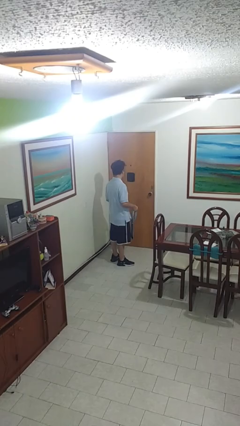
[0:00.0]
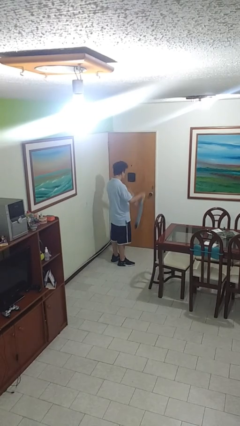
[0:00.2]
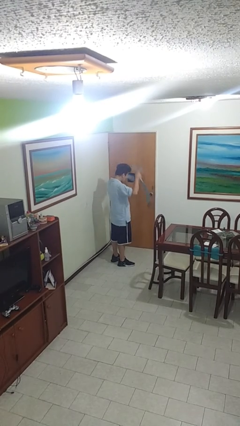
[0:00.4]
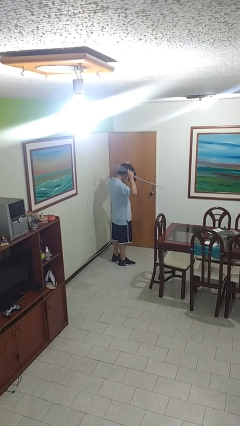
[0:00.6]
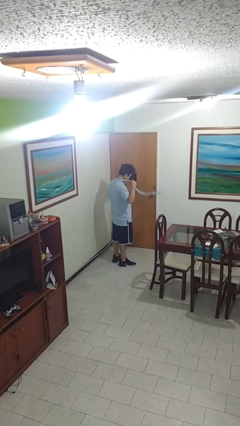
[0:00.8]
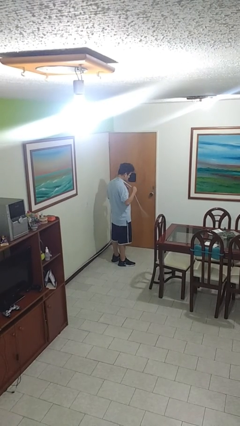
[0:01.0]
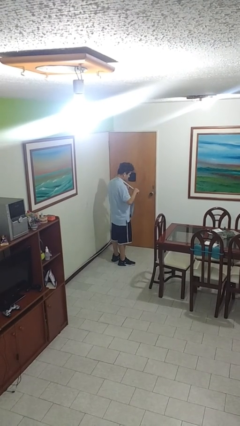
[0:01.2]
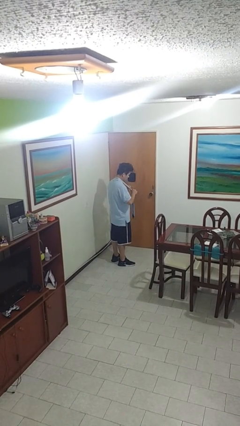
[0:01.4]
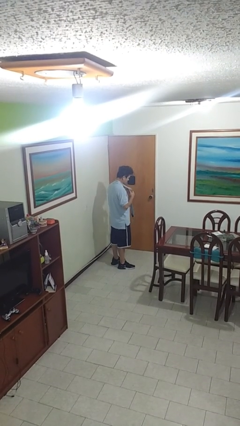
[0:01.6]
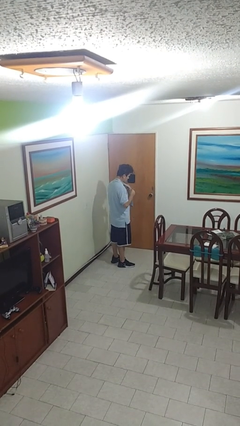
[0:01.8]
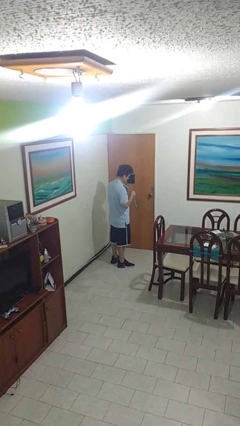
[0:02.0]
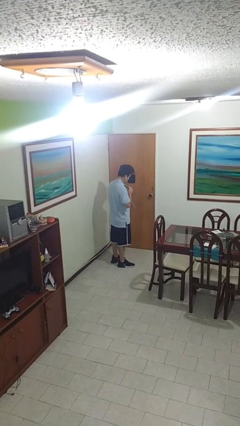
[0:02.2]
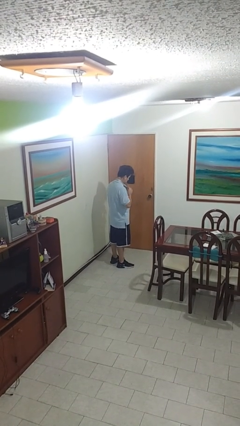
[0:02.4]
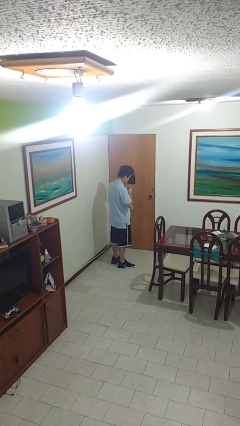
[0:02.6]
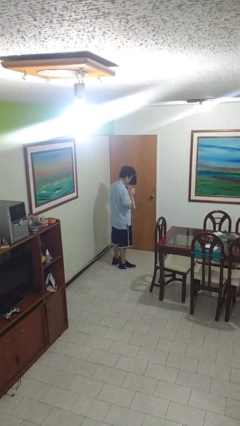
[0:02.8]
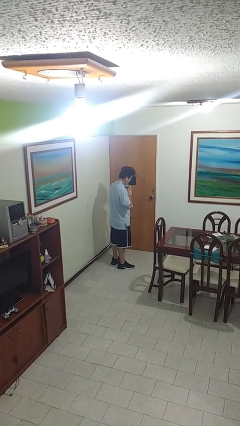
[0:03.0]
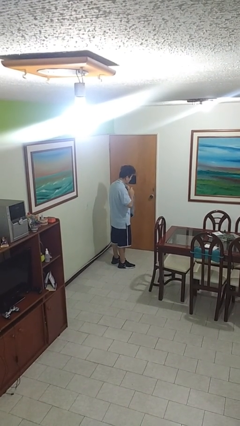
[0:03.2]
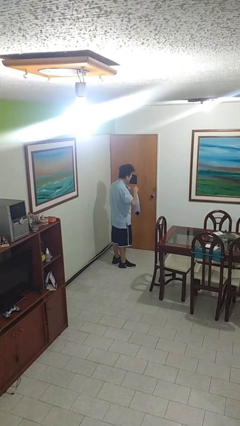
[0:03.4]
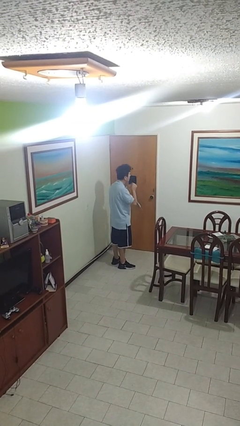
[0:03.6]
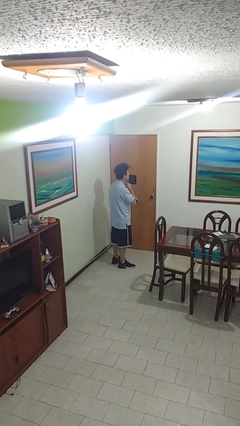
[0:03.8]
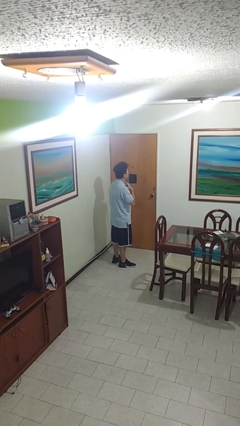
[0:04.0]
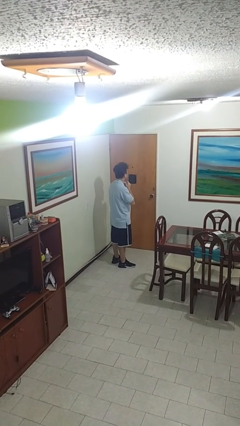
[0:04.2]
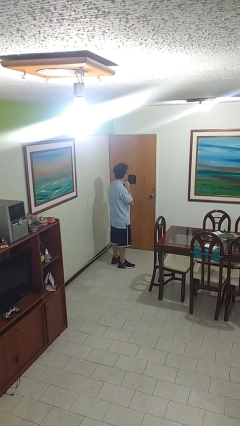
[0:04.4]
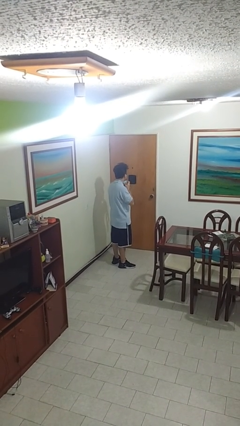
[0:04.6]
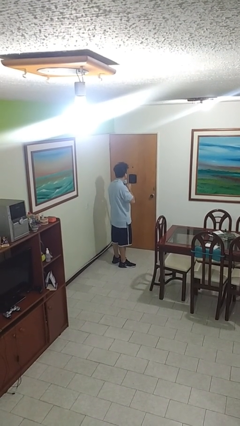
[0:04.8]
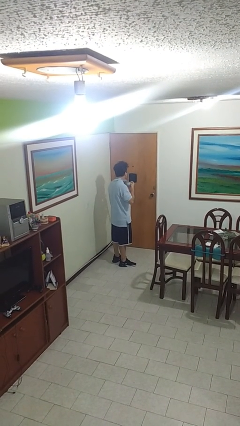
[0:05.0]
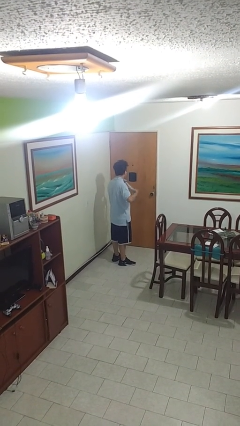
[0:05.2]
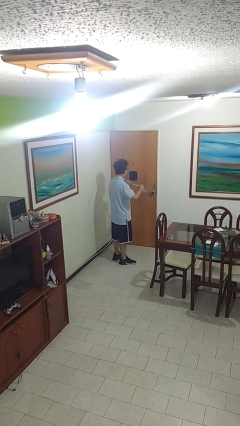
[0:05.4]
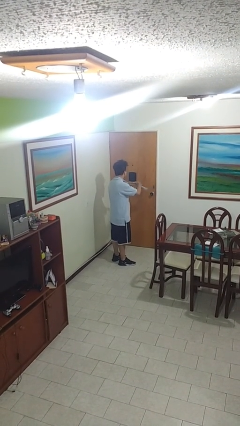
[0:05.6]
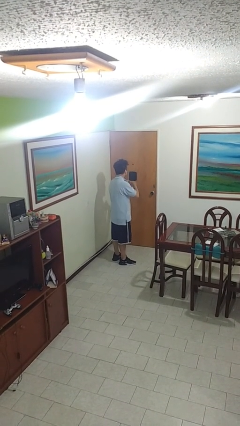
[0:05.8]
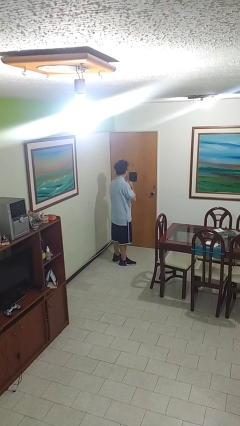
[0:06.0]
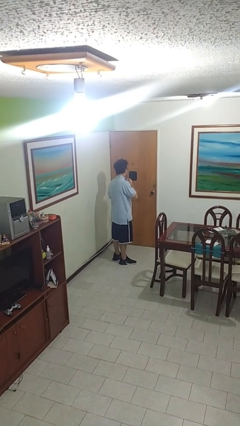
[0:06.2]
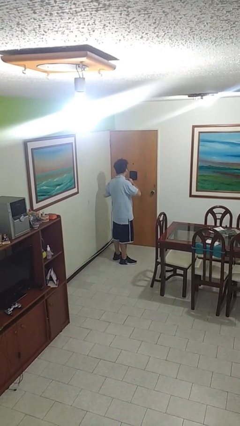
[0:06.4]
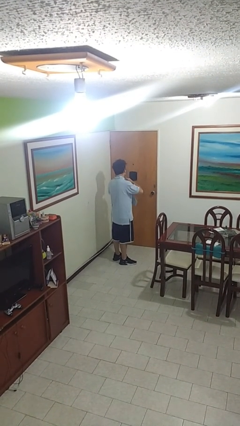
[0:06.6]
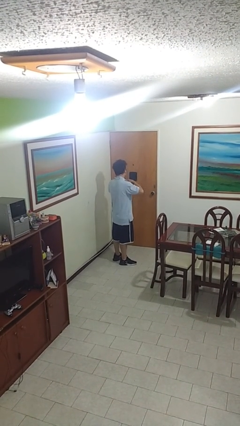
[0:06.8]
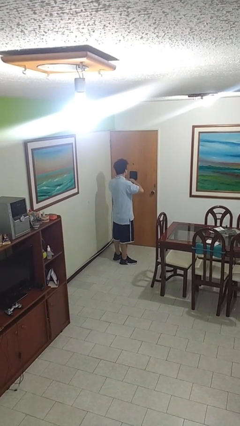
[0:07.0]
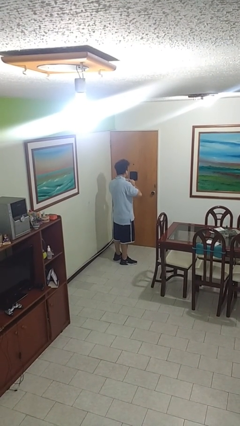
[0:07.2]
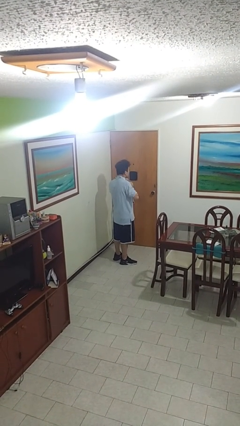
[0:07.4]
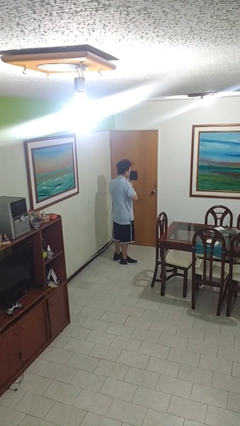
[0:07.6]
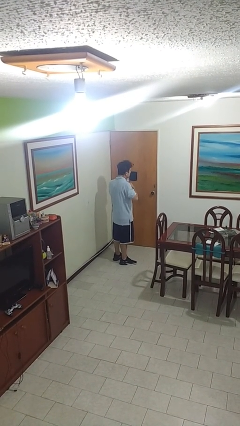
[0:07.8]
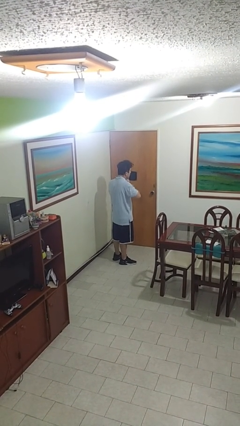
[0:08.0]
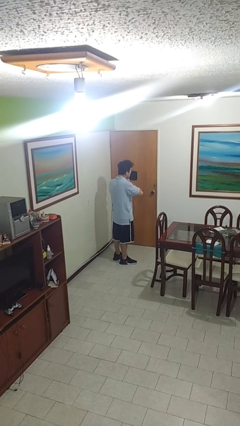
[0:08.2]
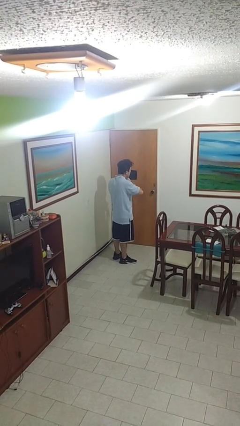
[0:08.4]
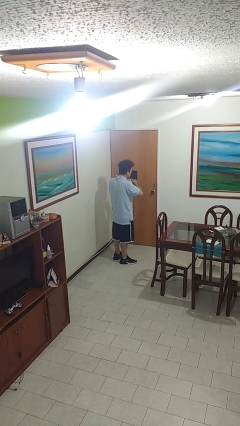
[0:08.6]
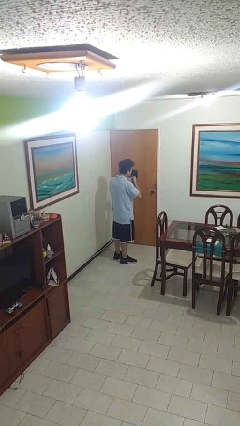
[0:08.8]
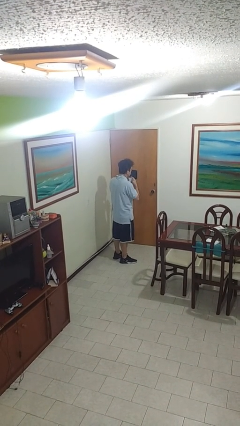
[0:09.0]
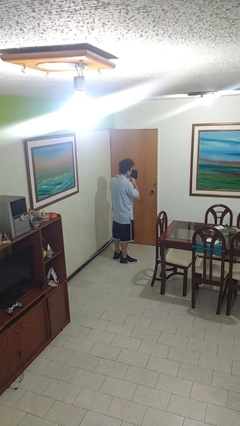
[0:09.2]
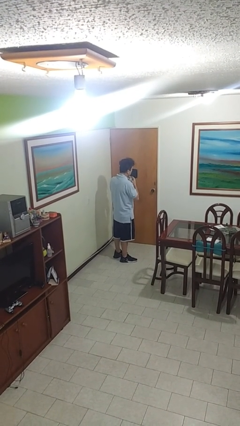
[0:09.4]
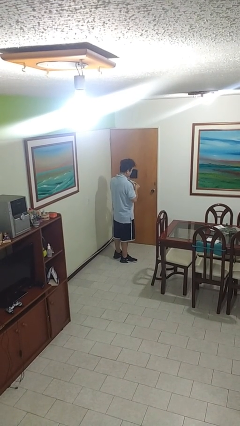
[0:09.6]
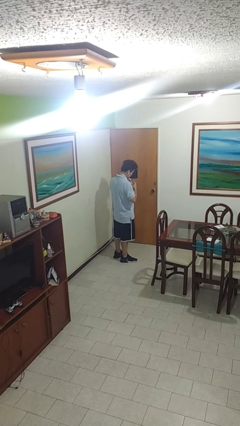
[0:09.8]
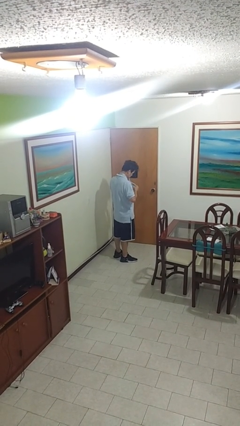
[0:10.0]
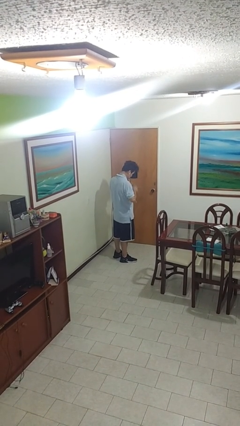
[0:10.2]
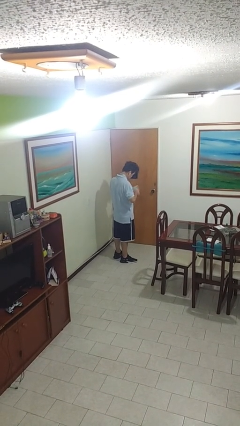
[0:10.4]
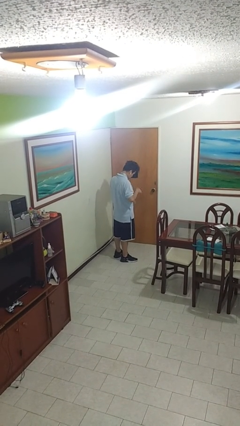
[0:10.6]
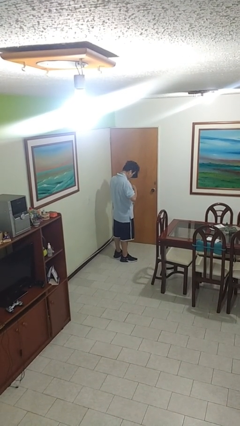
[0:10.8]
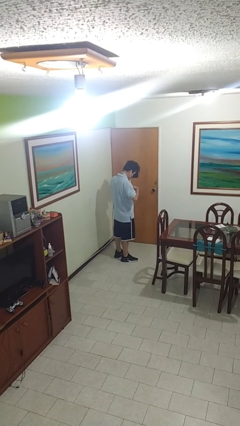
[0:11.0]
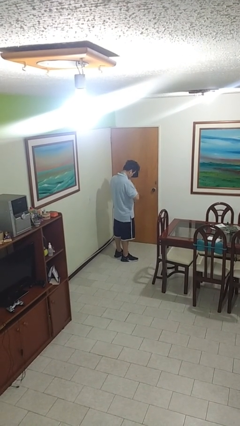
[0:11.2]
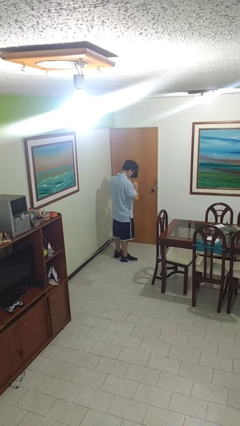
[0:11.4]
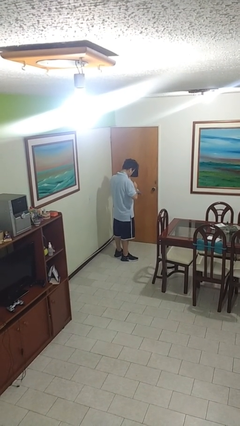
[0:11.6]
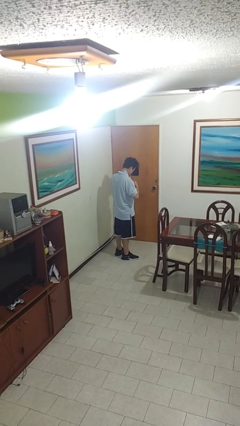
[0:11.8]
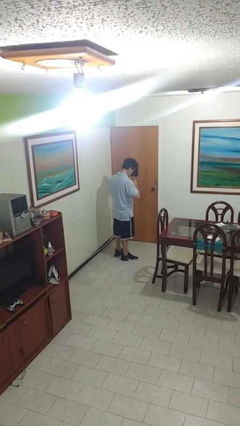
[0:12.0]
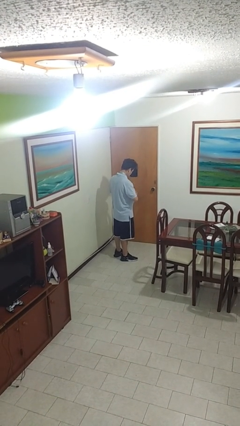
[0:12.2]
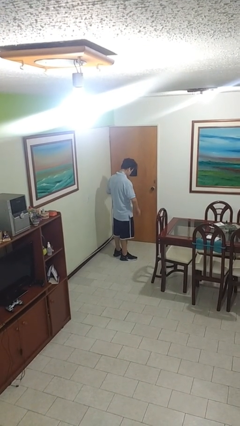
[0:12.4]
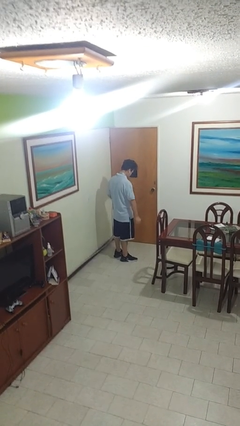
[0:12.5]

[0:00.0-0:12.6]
person puts on necktie

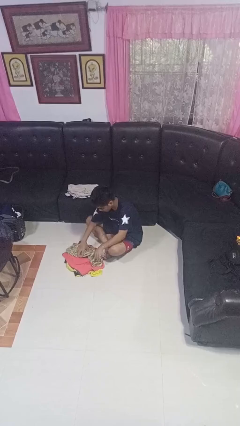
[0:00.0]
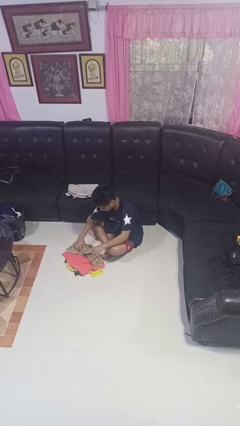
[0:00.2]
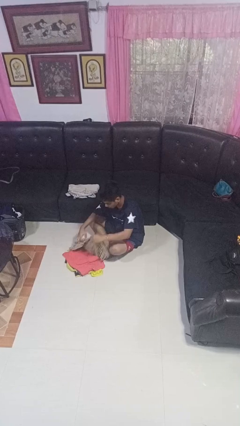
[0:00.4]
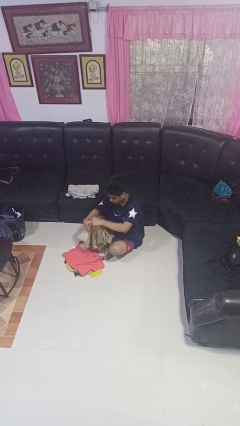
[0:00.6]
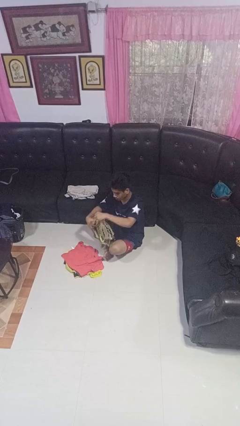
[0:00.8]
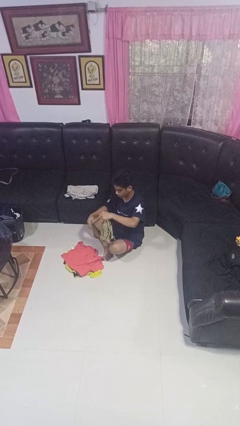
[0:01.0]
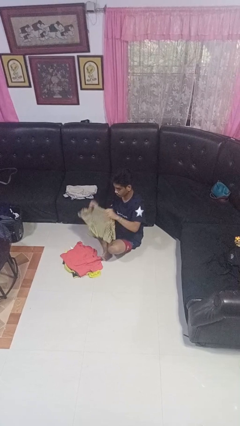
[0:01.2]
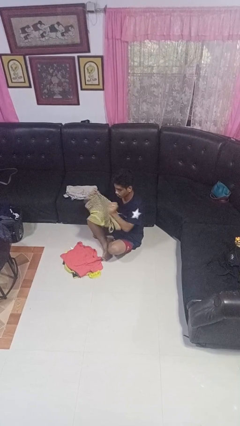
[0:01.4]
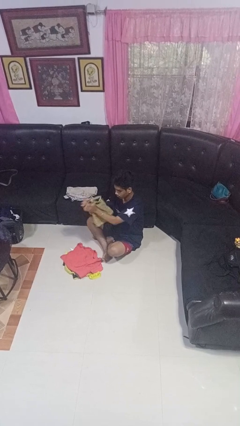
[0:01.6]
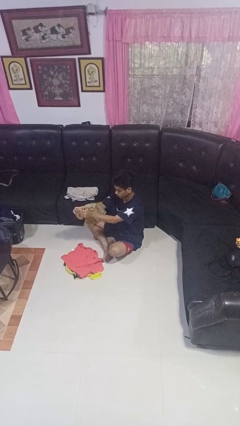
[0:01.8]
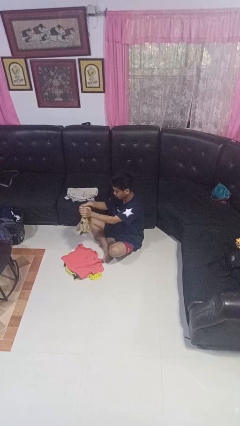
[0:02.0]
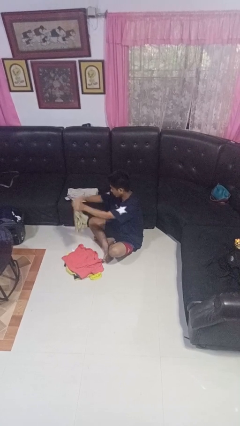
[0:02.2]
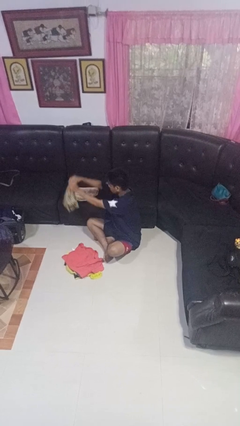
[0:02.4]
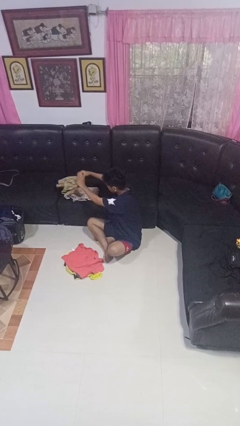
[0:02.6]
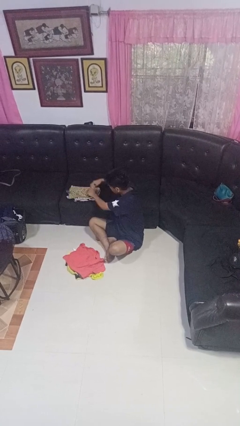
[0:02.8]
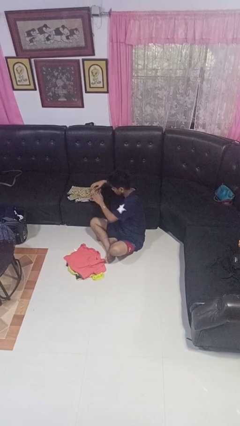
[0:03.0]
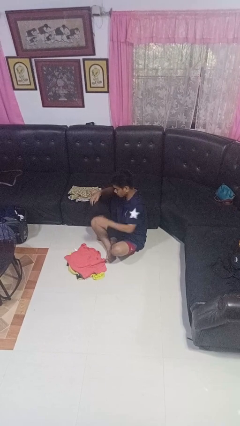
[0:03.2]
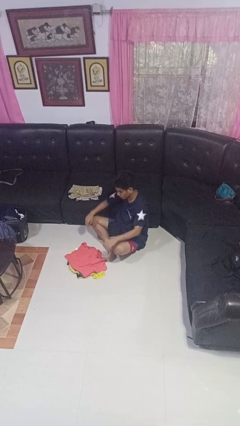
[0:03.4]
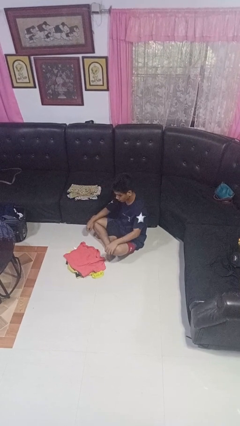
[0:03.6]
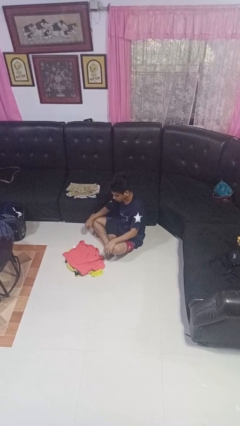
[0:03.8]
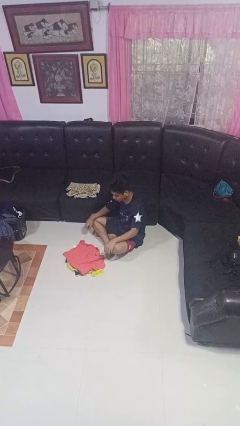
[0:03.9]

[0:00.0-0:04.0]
person folds shirt

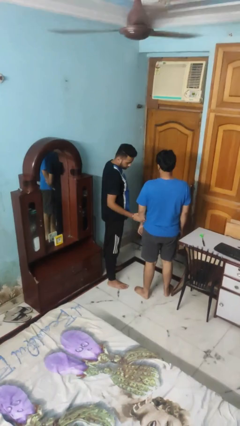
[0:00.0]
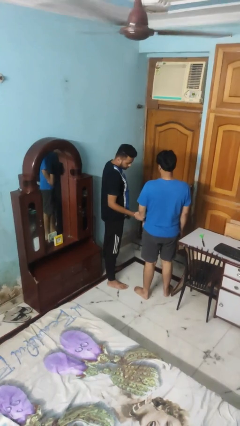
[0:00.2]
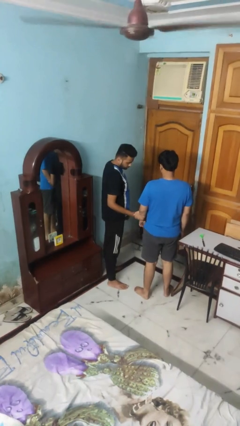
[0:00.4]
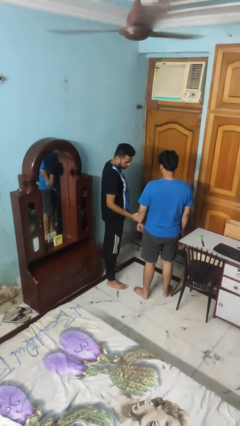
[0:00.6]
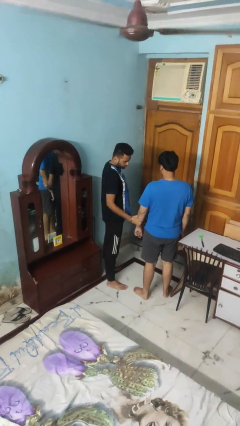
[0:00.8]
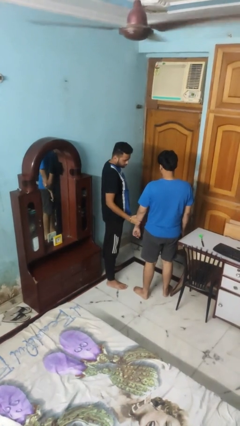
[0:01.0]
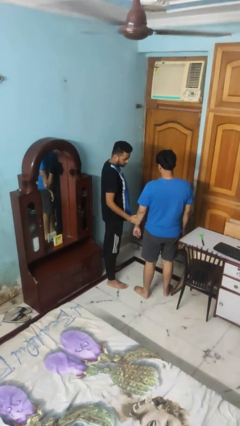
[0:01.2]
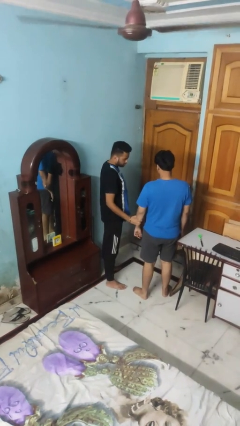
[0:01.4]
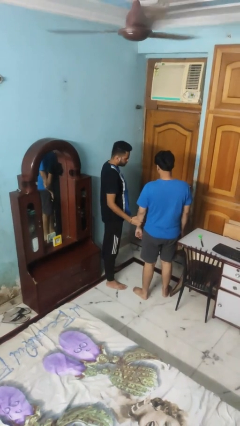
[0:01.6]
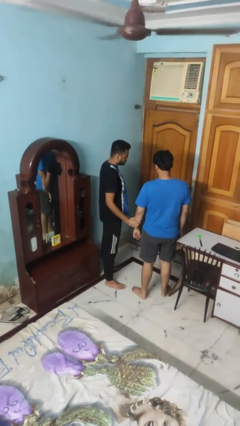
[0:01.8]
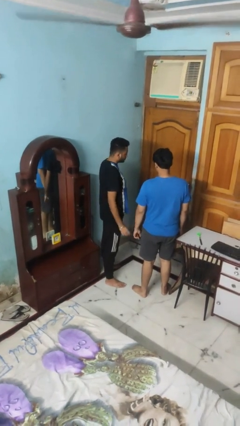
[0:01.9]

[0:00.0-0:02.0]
person grabs person by forearm
